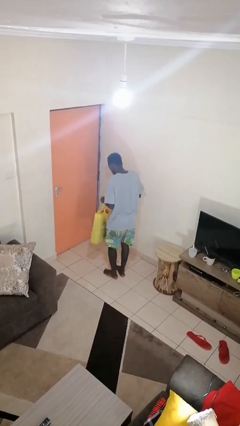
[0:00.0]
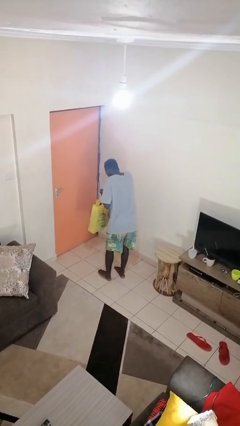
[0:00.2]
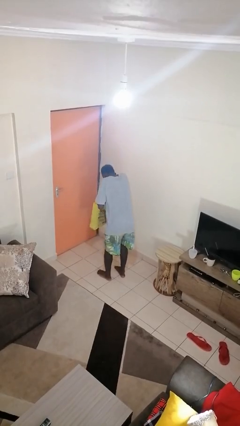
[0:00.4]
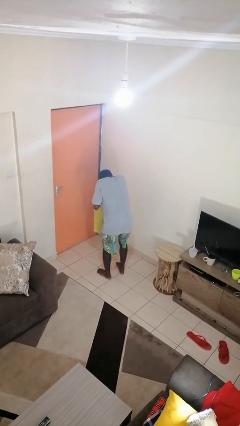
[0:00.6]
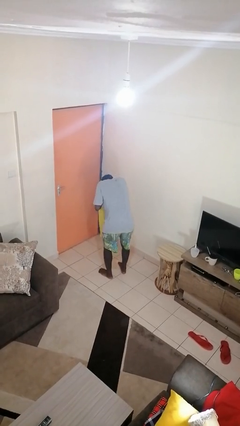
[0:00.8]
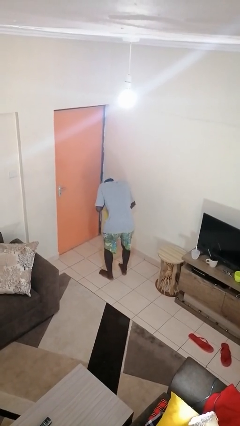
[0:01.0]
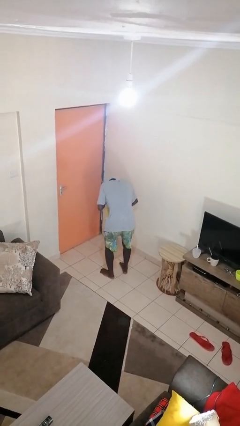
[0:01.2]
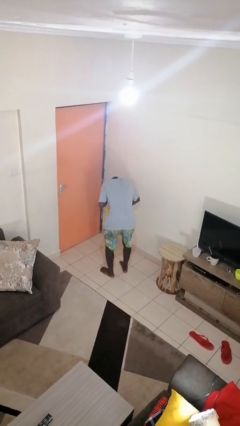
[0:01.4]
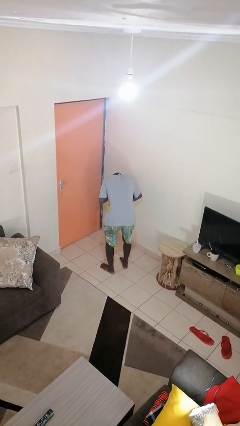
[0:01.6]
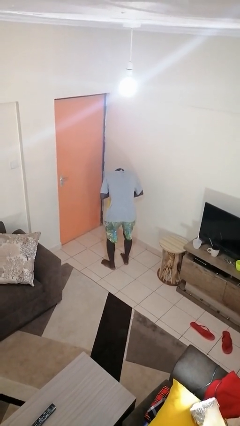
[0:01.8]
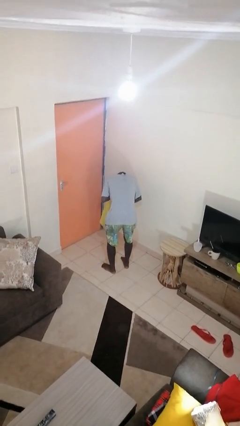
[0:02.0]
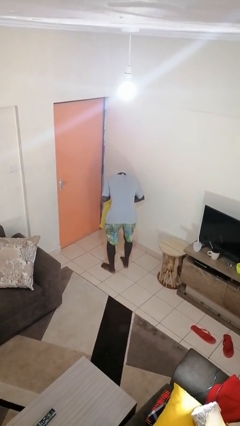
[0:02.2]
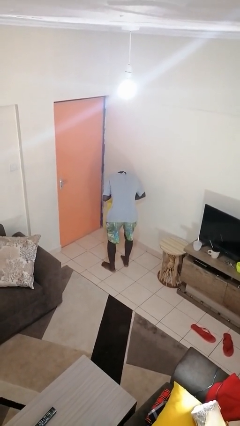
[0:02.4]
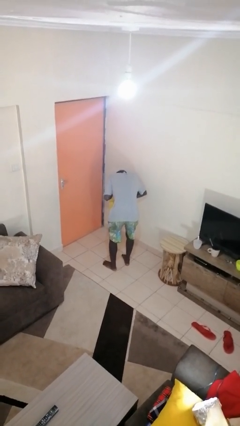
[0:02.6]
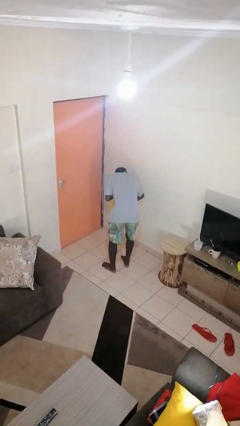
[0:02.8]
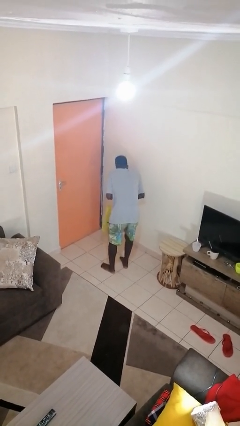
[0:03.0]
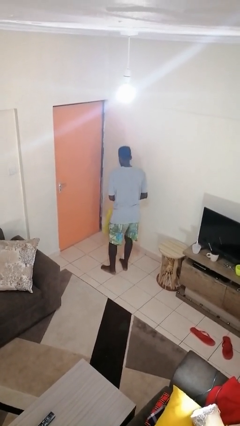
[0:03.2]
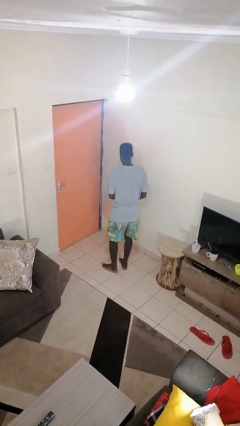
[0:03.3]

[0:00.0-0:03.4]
person searches in bag

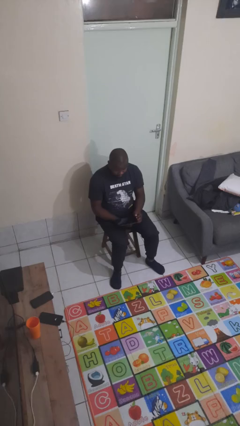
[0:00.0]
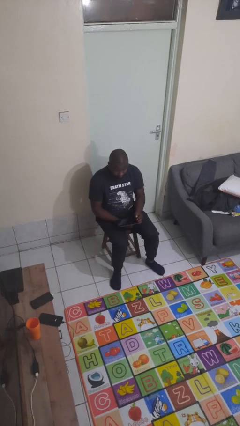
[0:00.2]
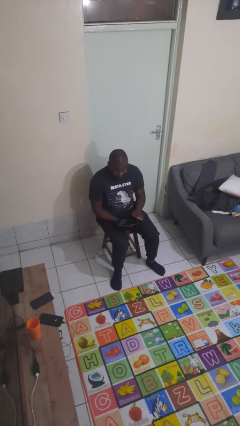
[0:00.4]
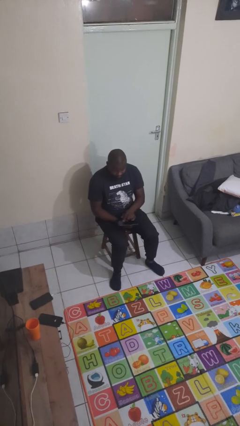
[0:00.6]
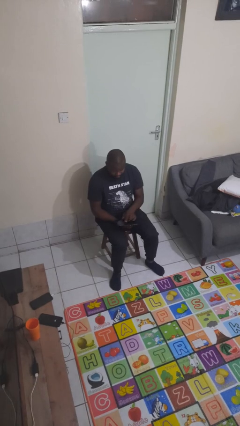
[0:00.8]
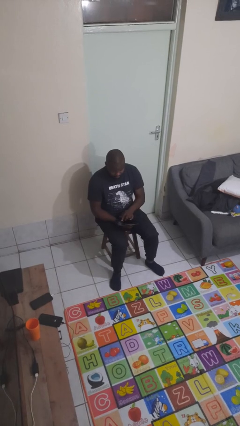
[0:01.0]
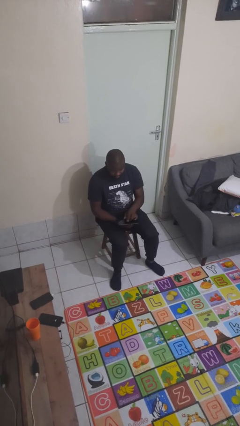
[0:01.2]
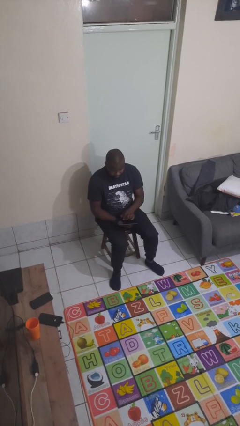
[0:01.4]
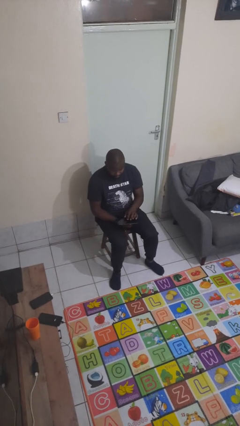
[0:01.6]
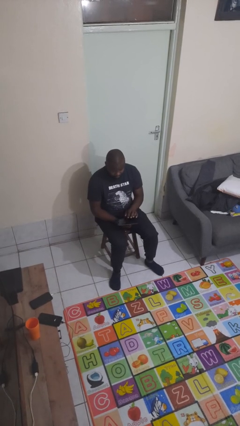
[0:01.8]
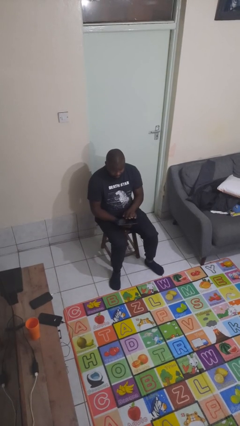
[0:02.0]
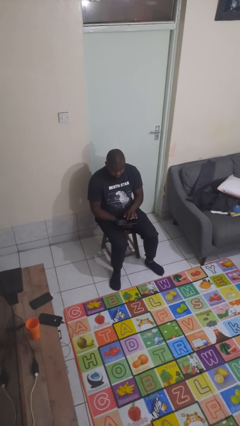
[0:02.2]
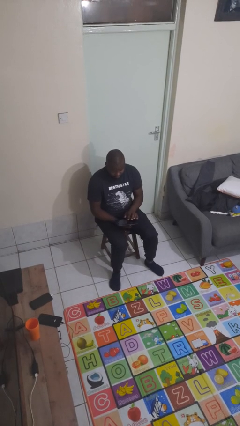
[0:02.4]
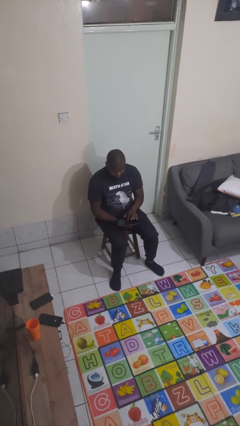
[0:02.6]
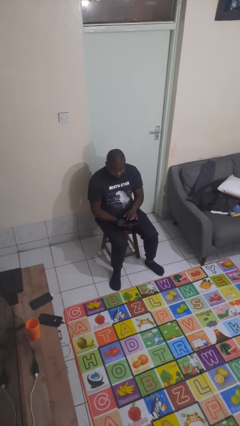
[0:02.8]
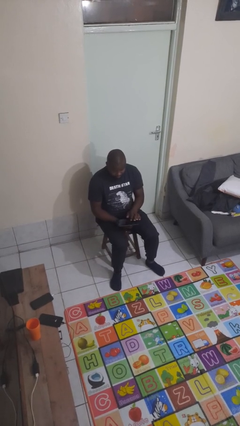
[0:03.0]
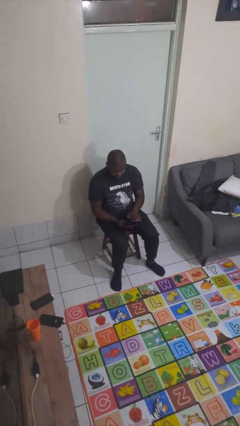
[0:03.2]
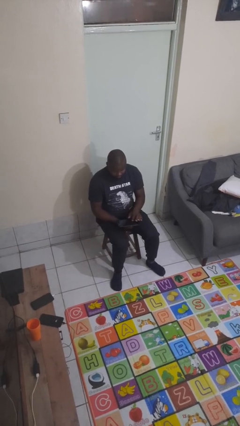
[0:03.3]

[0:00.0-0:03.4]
person interacts with tablet

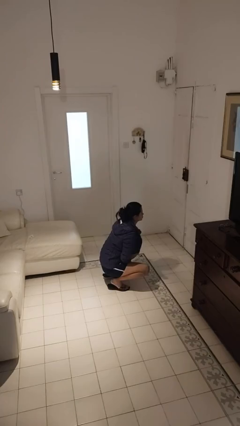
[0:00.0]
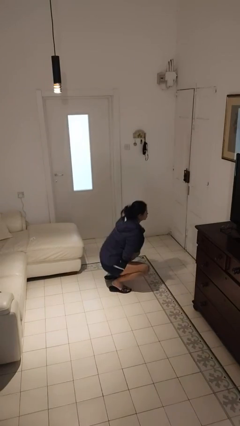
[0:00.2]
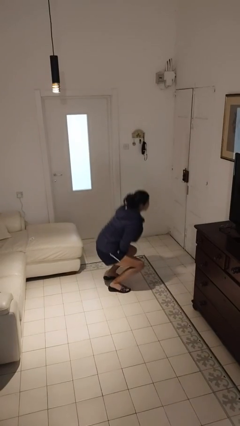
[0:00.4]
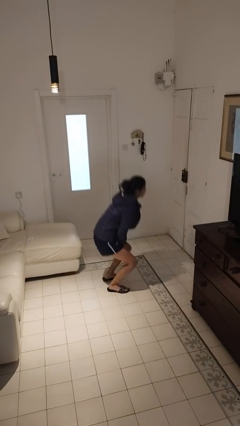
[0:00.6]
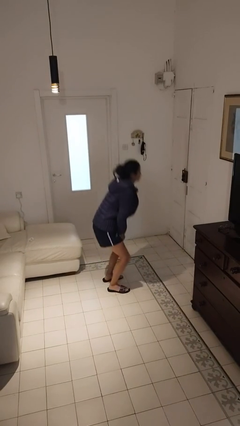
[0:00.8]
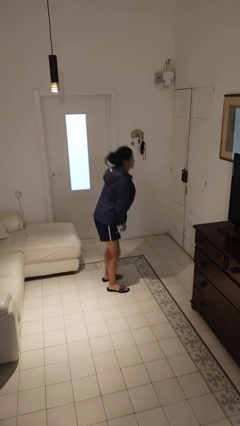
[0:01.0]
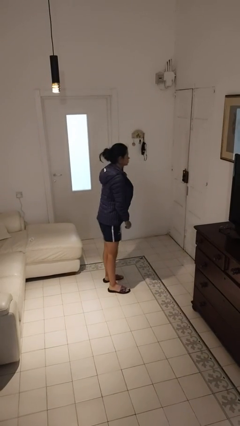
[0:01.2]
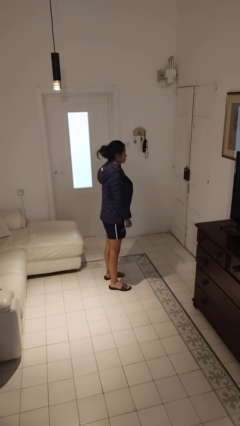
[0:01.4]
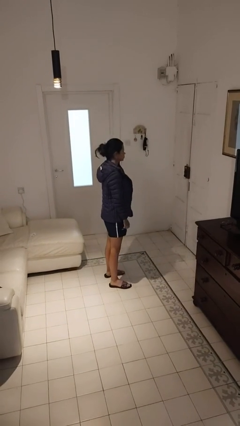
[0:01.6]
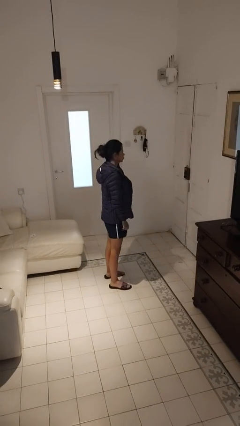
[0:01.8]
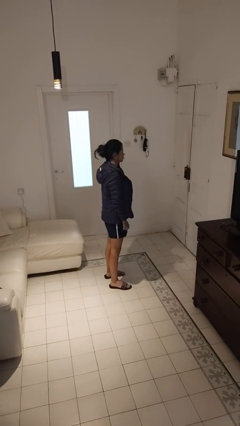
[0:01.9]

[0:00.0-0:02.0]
person stands up

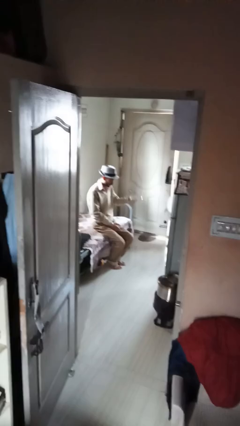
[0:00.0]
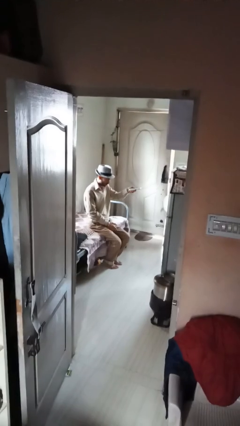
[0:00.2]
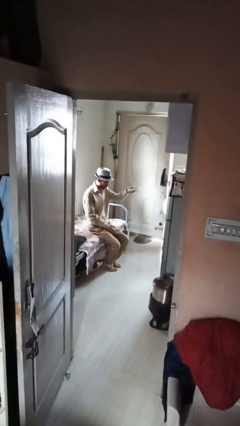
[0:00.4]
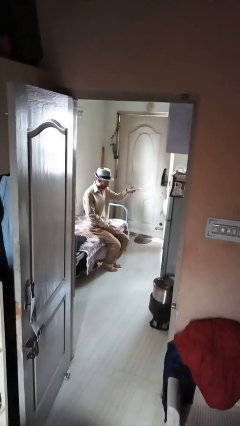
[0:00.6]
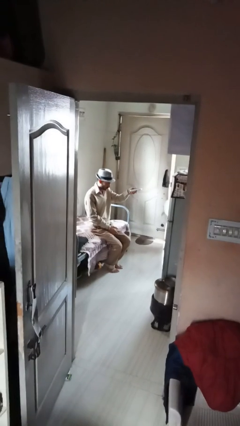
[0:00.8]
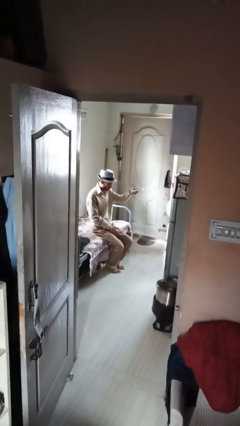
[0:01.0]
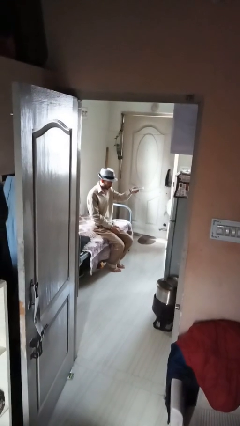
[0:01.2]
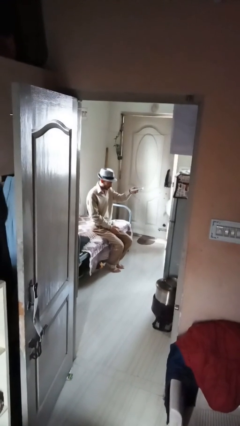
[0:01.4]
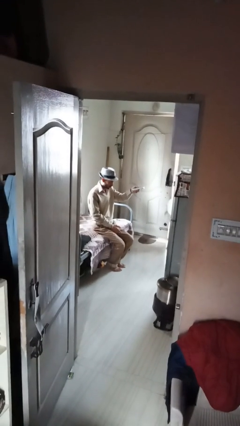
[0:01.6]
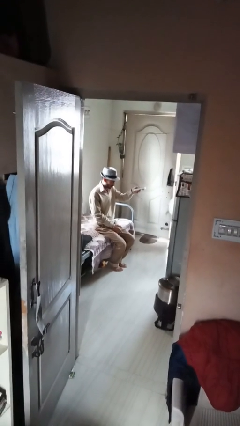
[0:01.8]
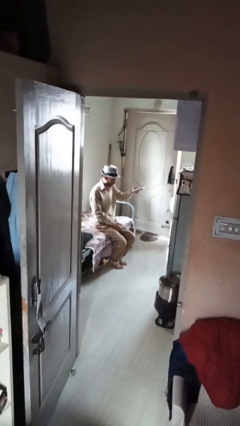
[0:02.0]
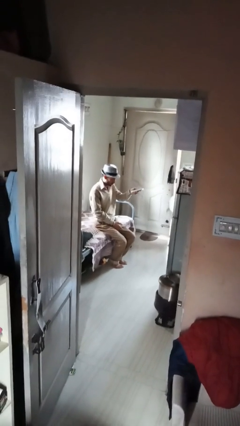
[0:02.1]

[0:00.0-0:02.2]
person uses television remote

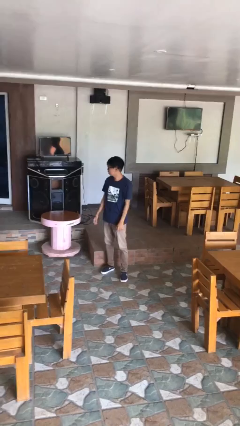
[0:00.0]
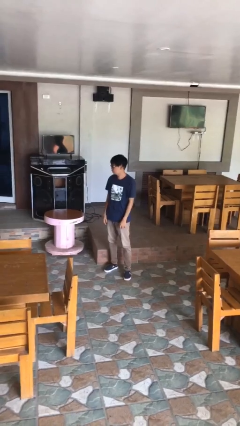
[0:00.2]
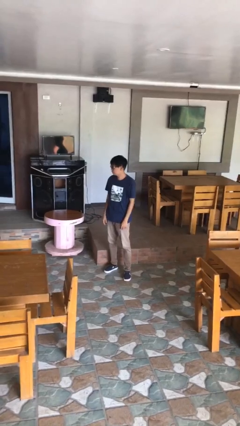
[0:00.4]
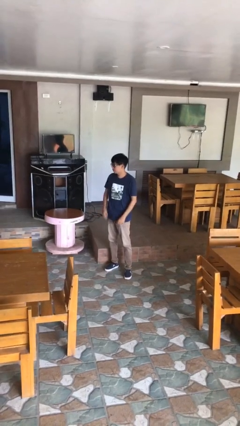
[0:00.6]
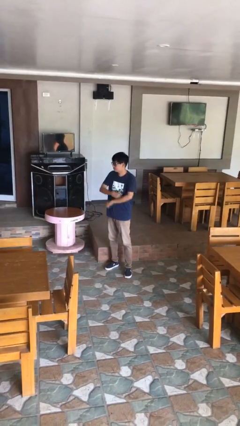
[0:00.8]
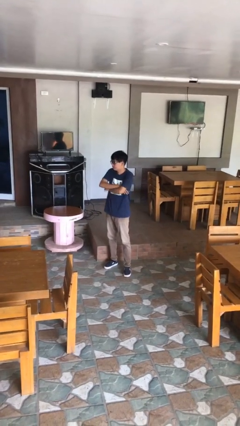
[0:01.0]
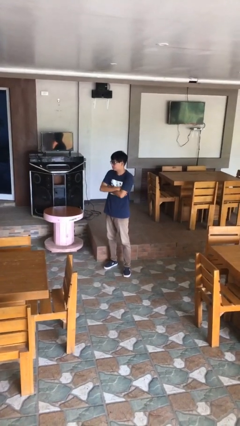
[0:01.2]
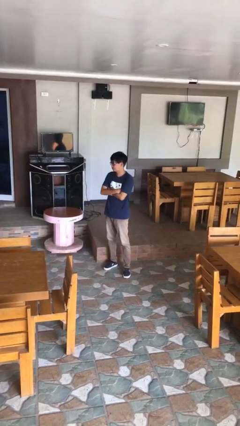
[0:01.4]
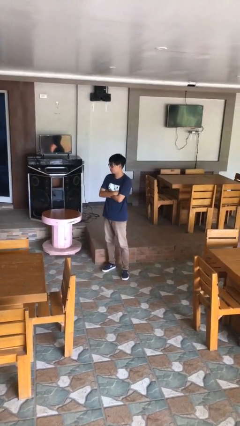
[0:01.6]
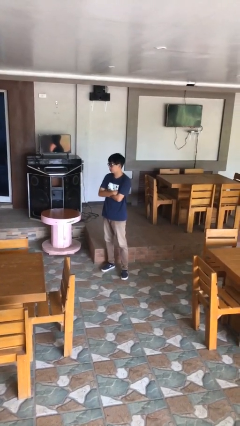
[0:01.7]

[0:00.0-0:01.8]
person crosses arms

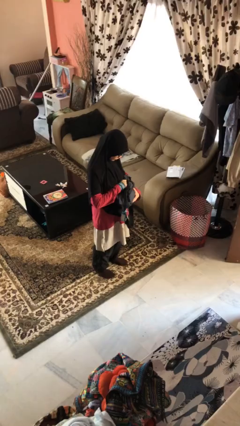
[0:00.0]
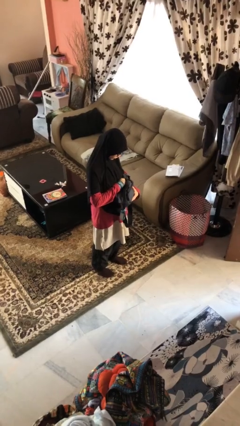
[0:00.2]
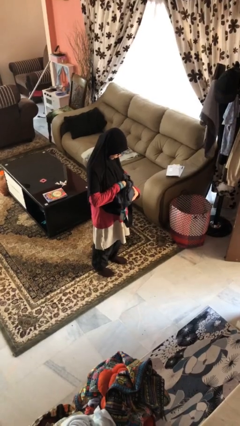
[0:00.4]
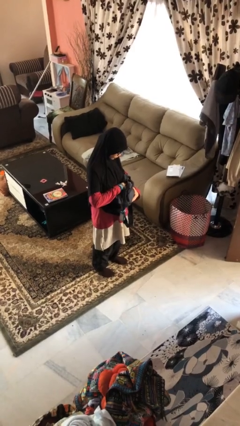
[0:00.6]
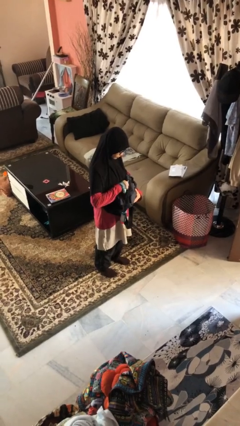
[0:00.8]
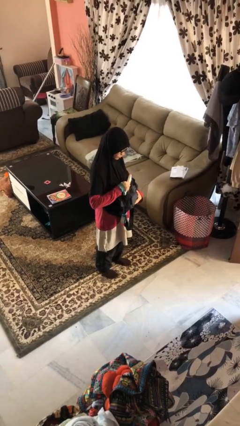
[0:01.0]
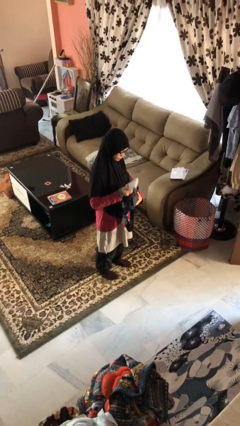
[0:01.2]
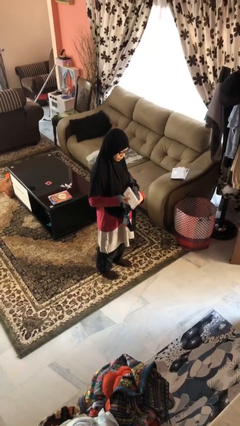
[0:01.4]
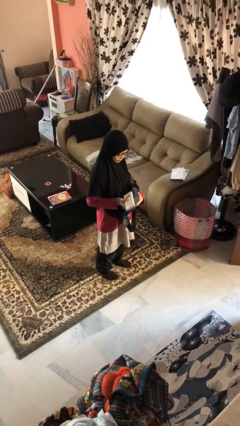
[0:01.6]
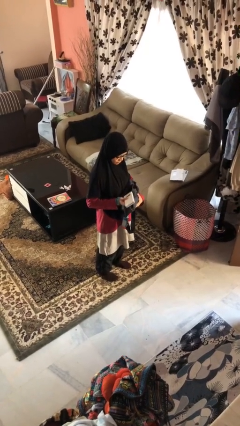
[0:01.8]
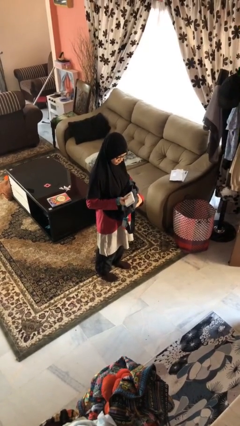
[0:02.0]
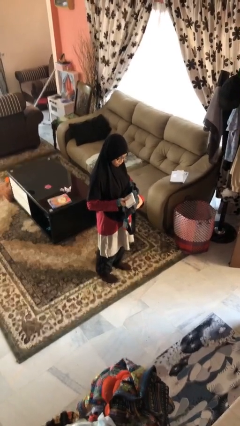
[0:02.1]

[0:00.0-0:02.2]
person takes object from purse

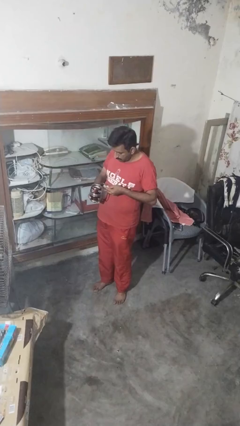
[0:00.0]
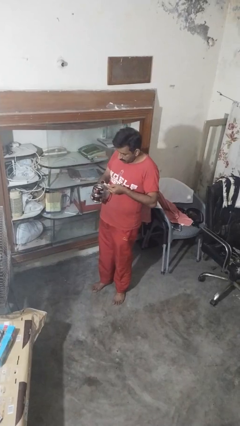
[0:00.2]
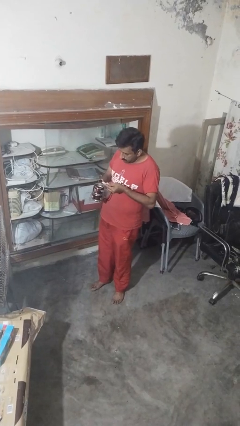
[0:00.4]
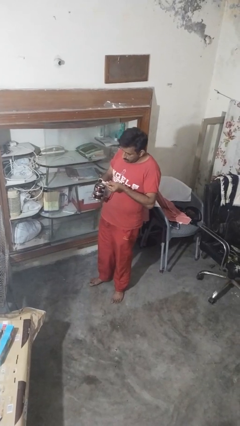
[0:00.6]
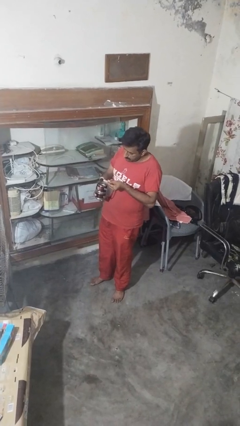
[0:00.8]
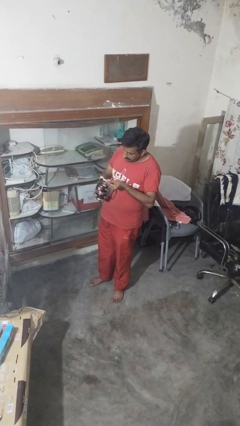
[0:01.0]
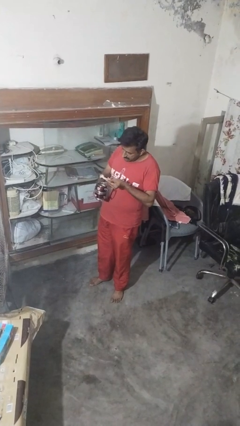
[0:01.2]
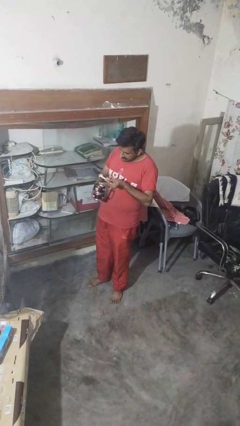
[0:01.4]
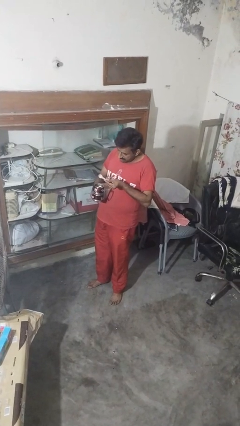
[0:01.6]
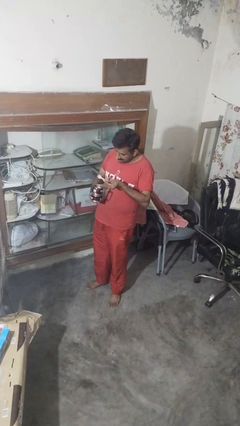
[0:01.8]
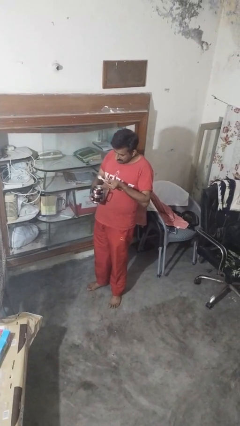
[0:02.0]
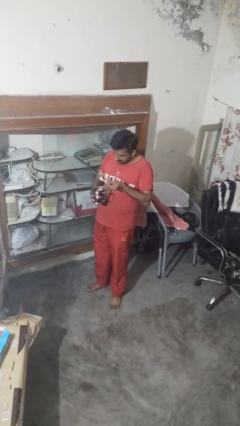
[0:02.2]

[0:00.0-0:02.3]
person pours coffee into mug
